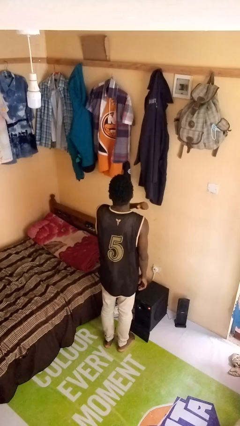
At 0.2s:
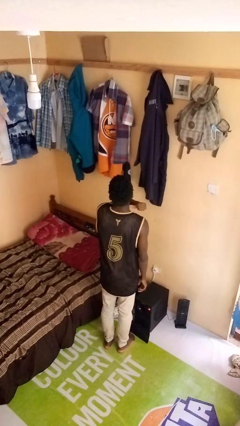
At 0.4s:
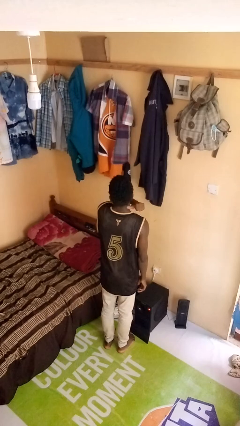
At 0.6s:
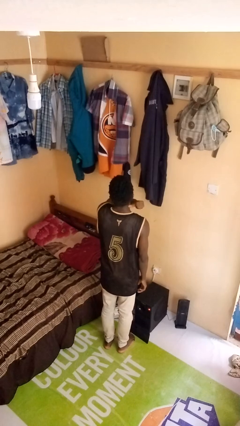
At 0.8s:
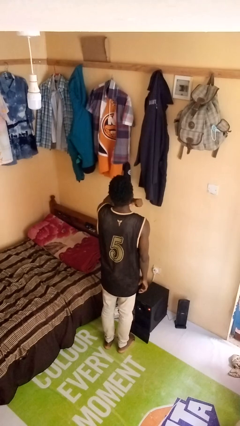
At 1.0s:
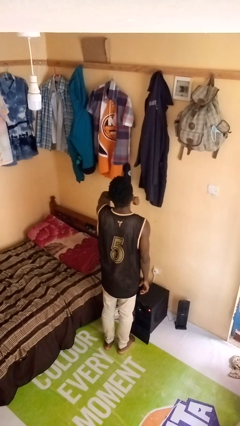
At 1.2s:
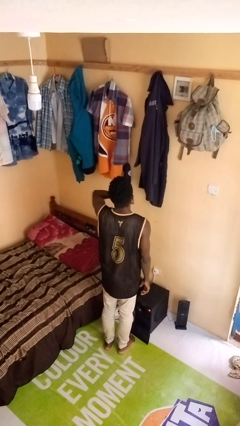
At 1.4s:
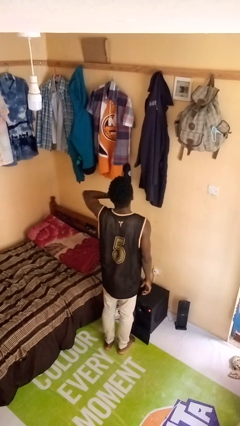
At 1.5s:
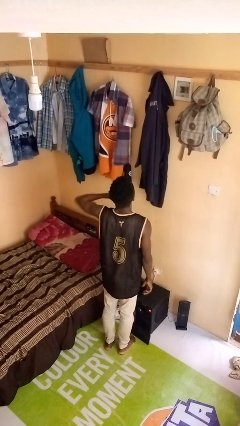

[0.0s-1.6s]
person gestures cut

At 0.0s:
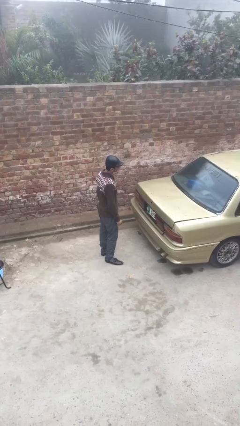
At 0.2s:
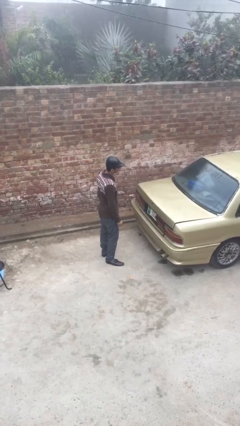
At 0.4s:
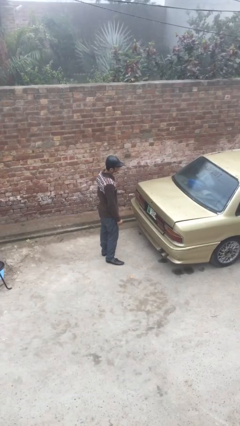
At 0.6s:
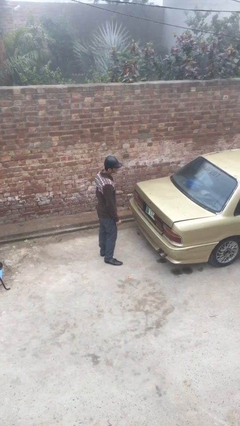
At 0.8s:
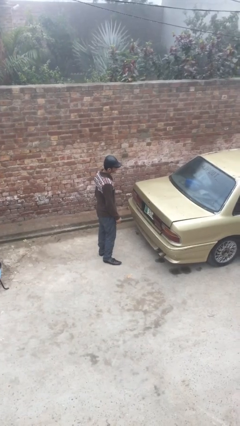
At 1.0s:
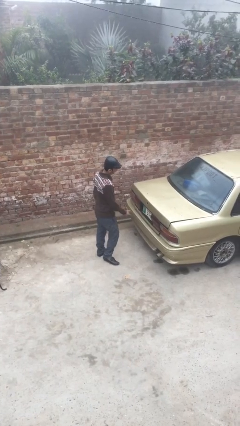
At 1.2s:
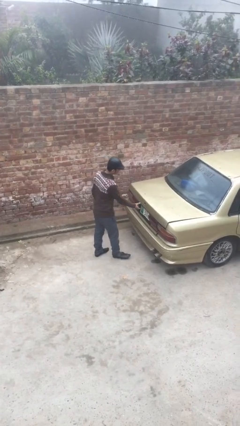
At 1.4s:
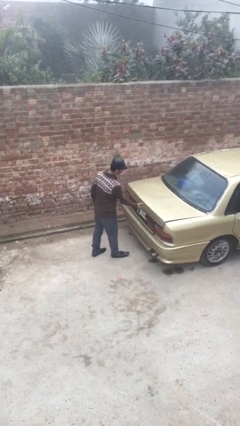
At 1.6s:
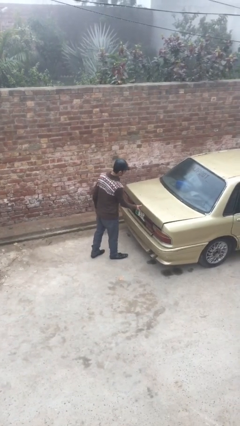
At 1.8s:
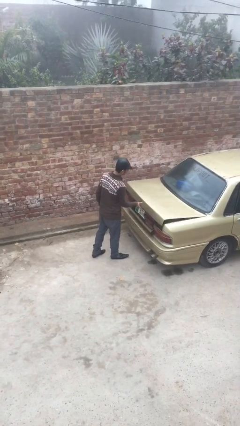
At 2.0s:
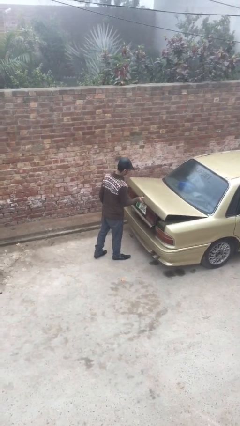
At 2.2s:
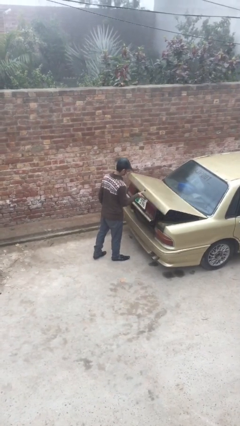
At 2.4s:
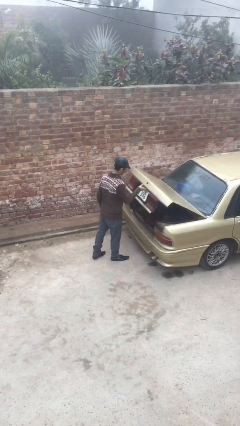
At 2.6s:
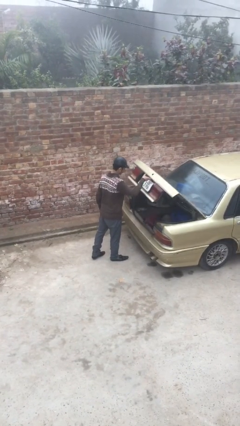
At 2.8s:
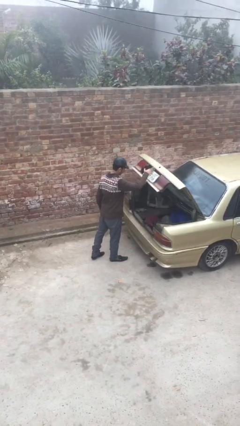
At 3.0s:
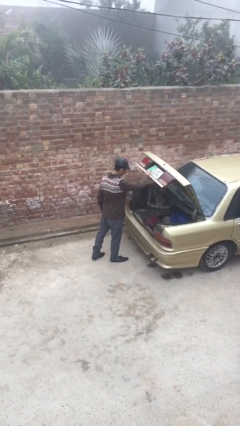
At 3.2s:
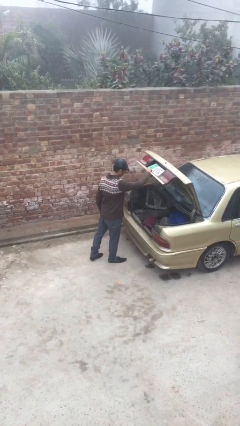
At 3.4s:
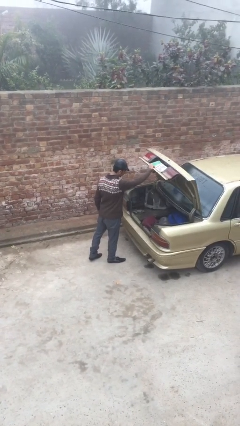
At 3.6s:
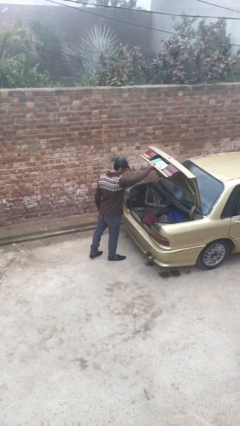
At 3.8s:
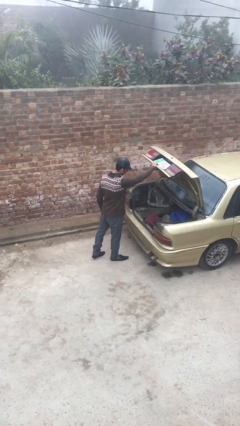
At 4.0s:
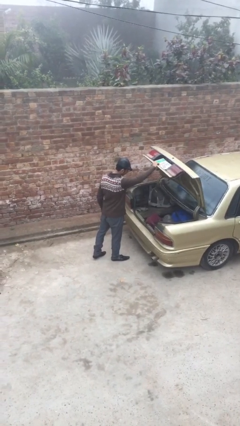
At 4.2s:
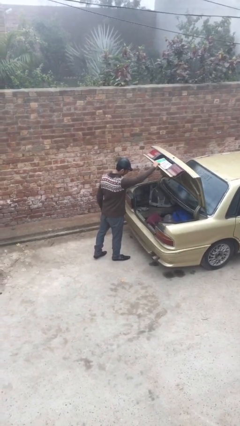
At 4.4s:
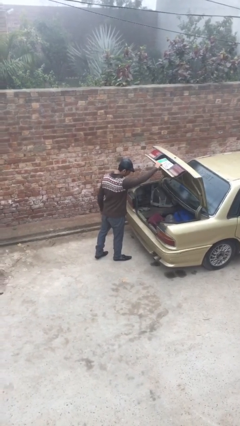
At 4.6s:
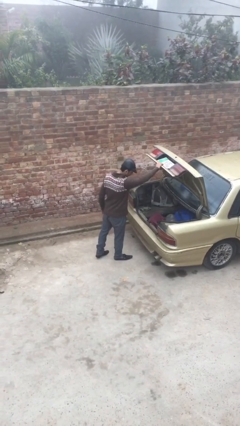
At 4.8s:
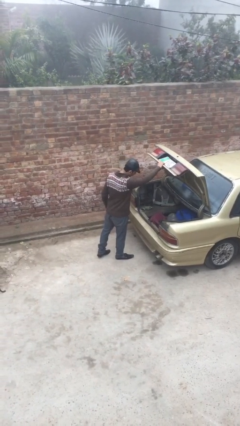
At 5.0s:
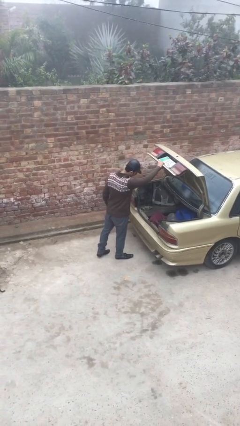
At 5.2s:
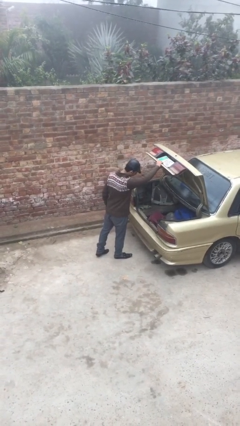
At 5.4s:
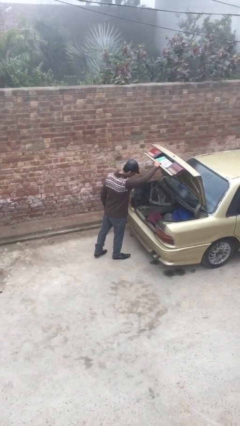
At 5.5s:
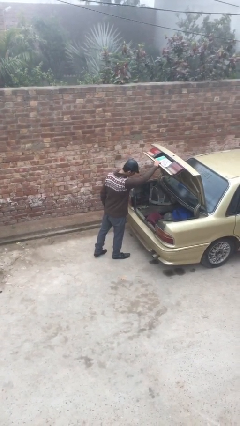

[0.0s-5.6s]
person opens car trunk

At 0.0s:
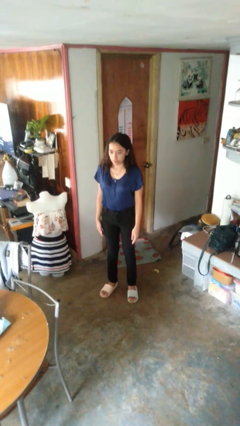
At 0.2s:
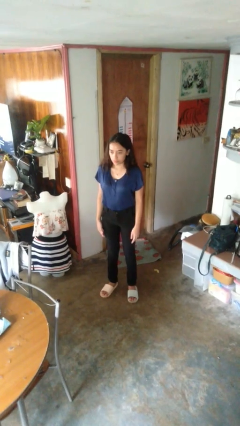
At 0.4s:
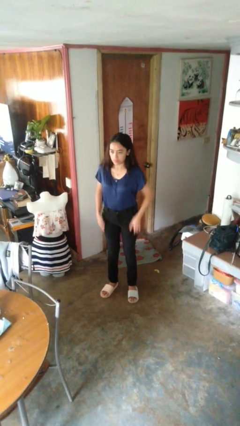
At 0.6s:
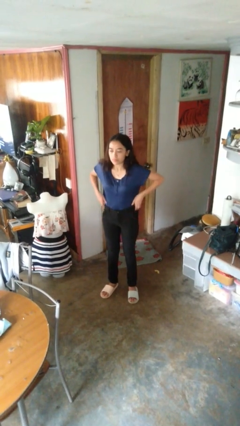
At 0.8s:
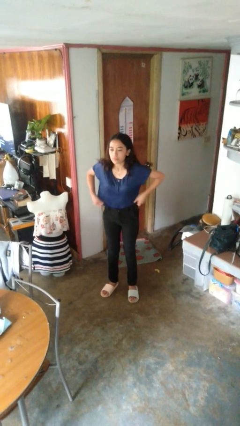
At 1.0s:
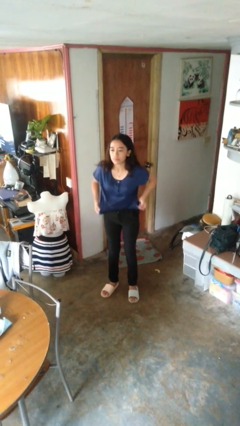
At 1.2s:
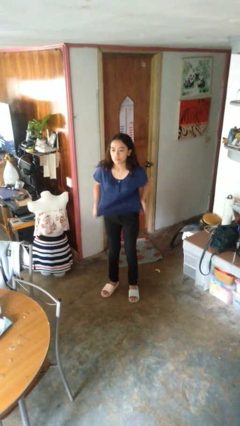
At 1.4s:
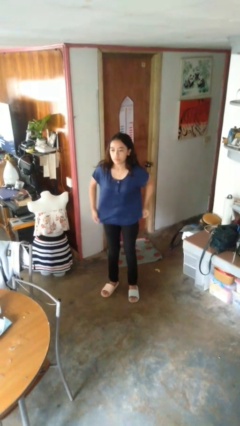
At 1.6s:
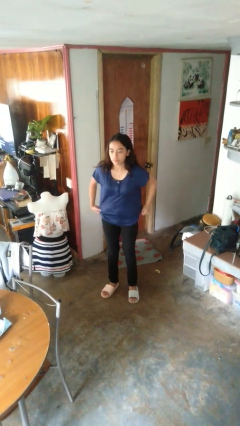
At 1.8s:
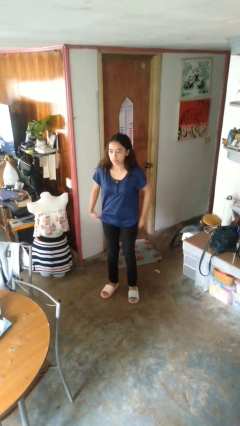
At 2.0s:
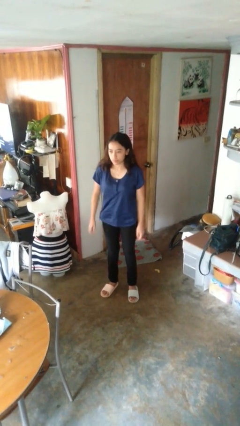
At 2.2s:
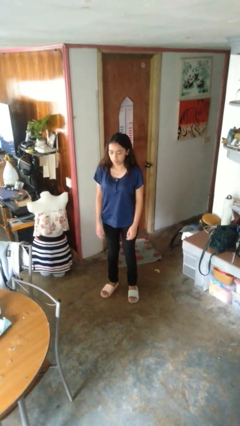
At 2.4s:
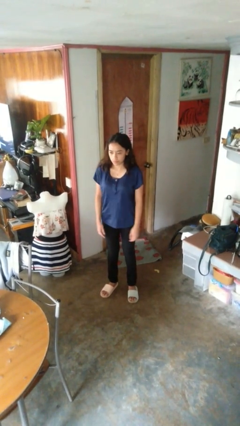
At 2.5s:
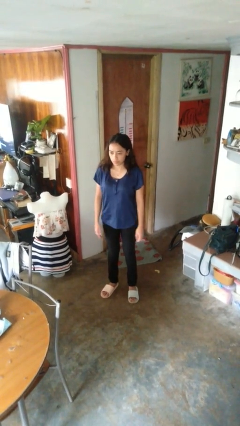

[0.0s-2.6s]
person untucks shirt

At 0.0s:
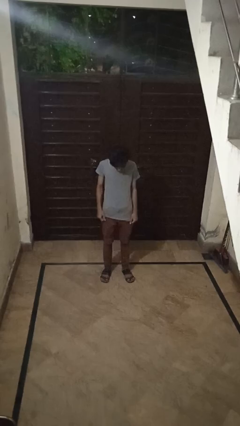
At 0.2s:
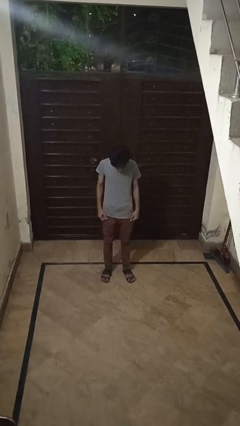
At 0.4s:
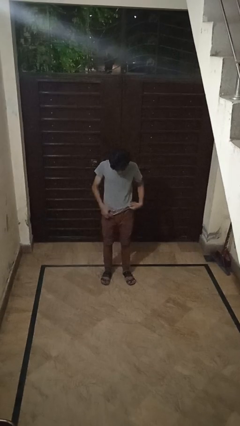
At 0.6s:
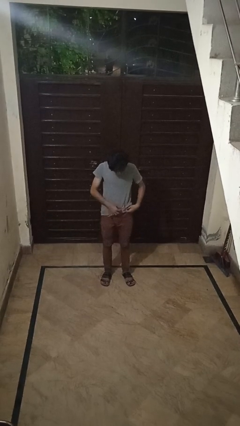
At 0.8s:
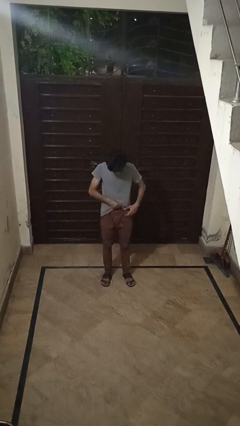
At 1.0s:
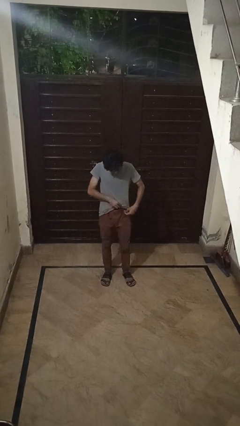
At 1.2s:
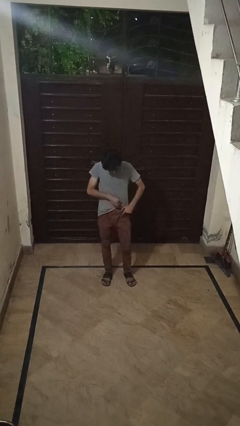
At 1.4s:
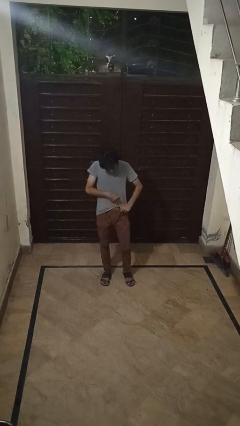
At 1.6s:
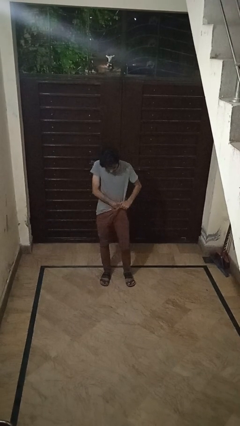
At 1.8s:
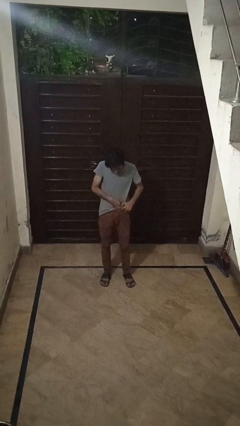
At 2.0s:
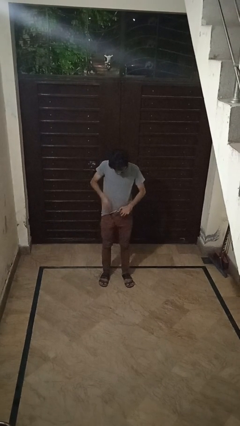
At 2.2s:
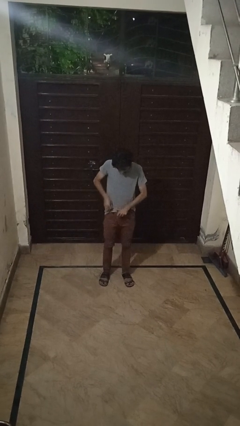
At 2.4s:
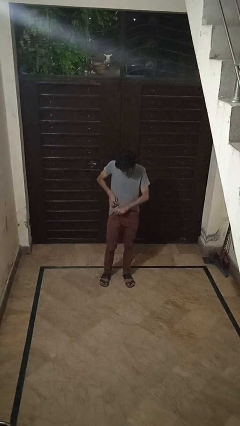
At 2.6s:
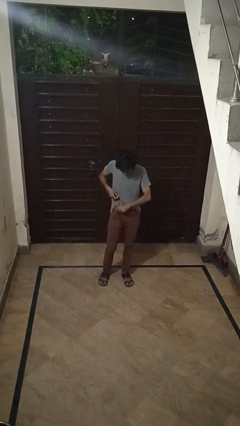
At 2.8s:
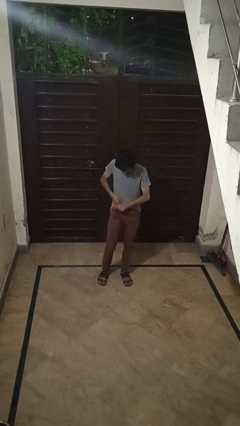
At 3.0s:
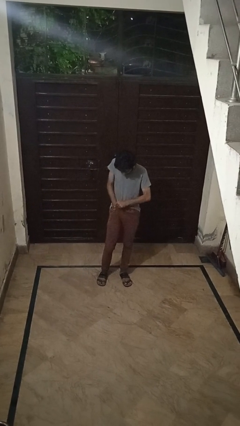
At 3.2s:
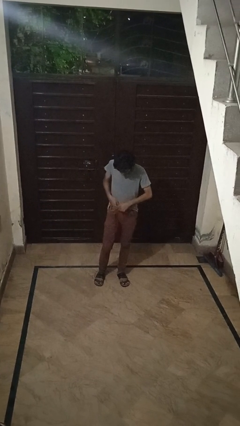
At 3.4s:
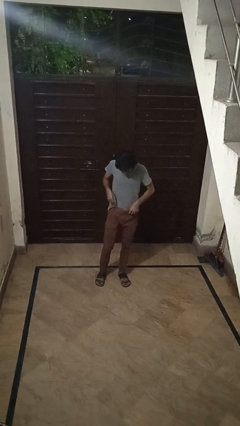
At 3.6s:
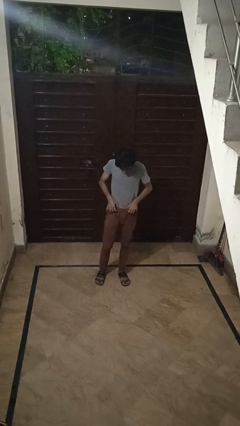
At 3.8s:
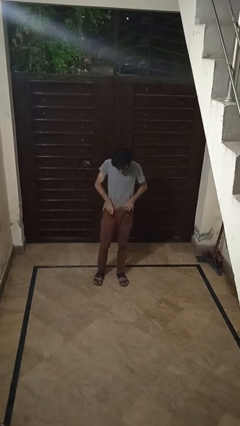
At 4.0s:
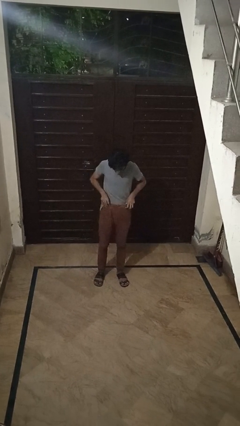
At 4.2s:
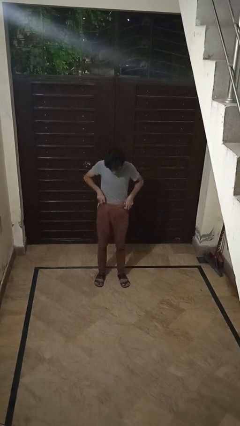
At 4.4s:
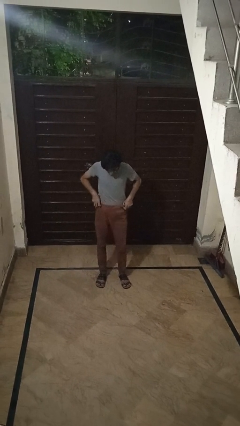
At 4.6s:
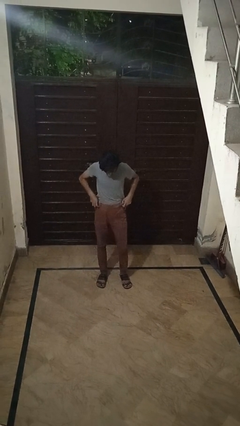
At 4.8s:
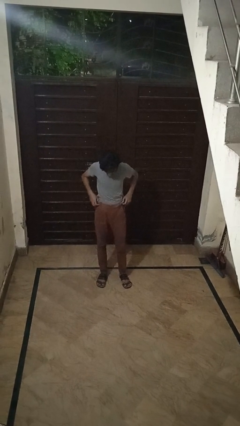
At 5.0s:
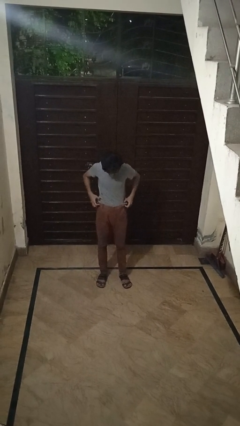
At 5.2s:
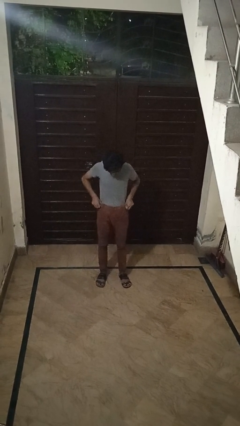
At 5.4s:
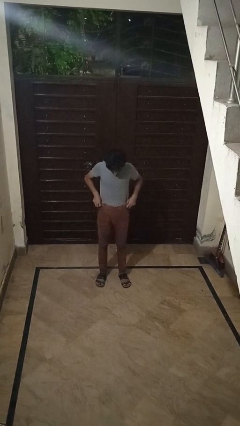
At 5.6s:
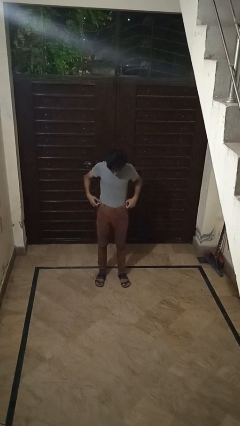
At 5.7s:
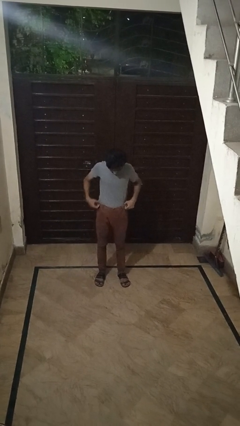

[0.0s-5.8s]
person tucks in shirt

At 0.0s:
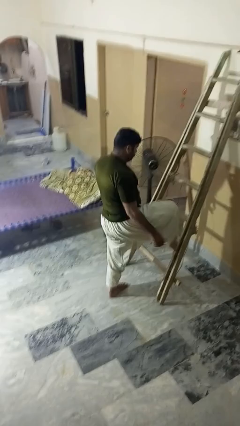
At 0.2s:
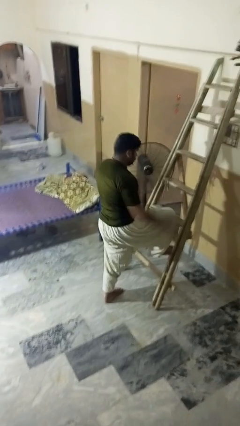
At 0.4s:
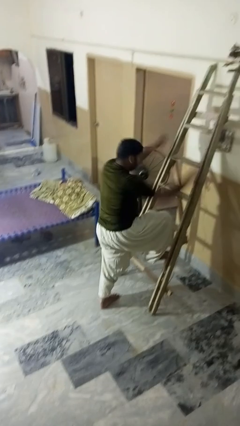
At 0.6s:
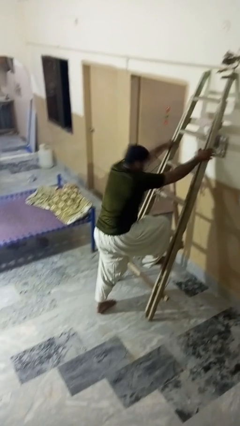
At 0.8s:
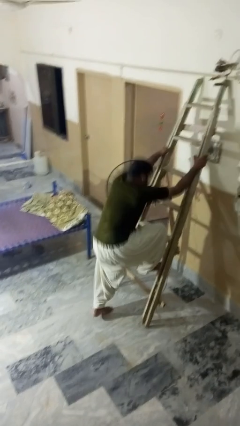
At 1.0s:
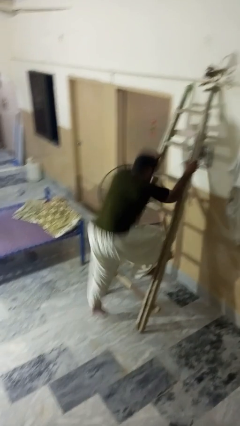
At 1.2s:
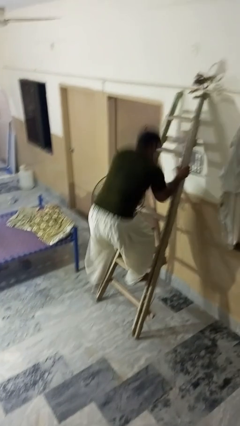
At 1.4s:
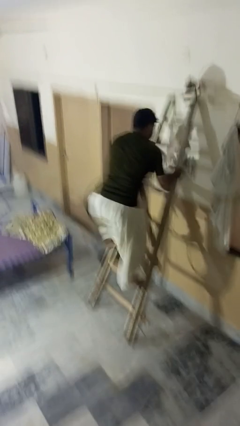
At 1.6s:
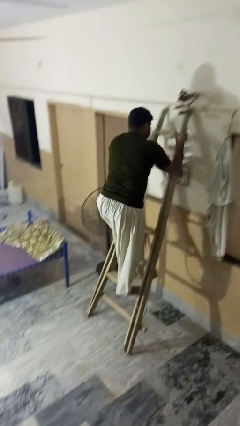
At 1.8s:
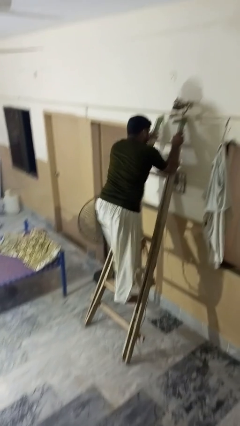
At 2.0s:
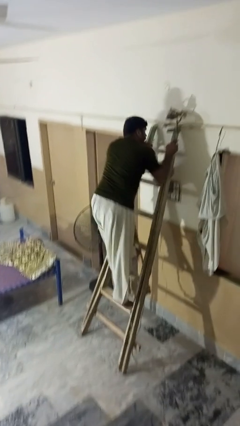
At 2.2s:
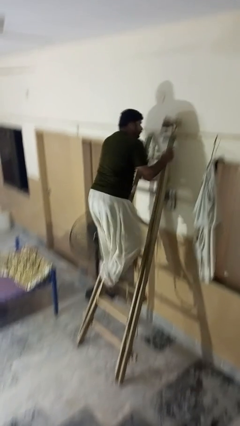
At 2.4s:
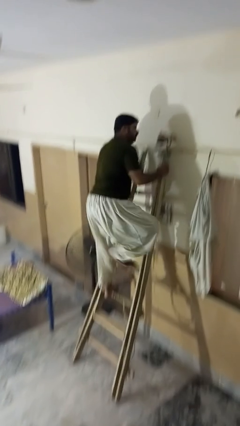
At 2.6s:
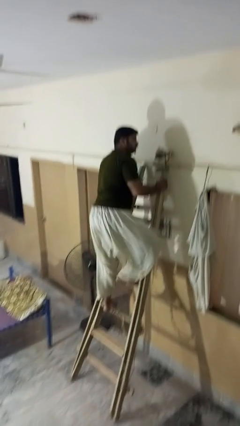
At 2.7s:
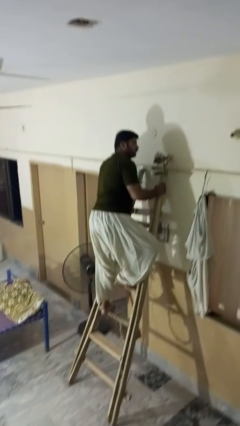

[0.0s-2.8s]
person climbs up ladder
